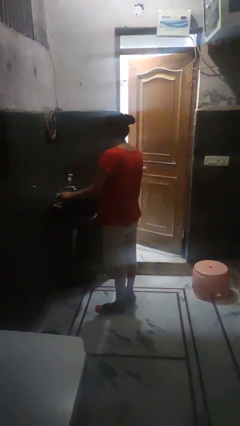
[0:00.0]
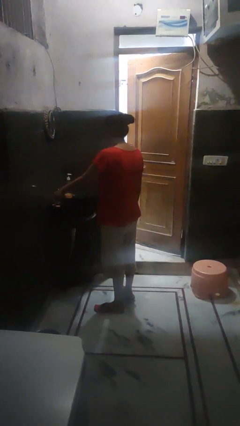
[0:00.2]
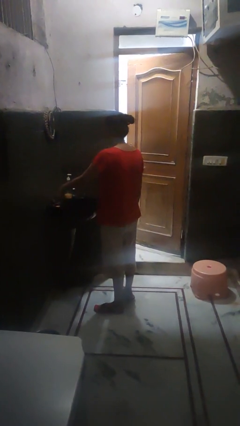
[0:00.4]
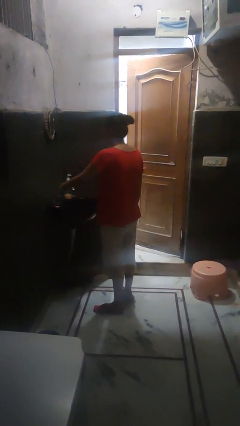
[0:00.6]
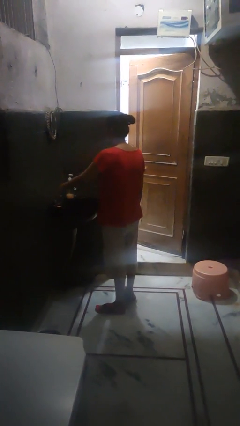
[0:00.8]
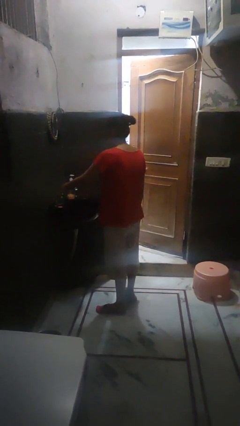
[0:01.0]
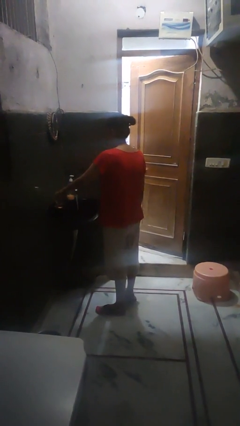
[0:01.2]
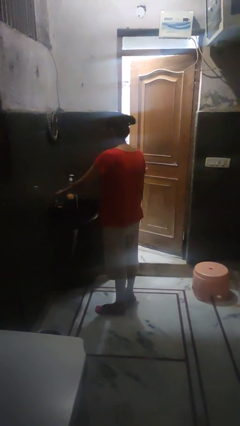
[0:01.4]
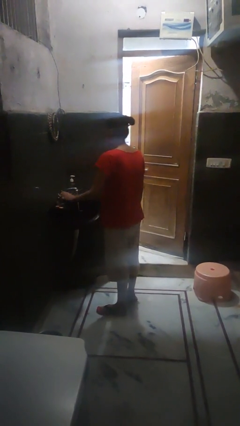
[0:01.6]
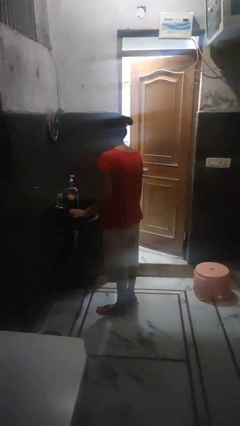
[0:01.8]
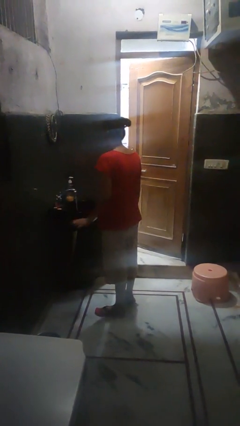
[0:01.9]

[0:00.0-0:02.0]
person turns on faucet

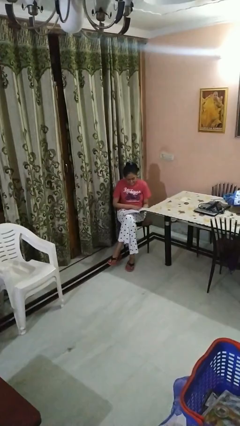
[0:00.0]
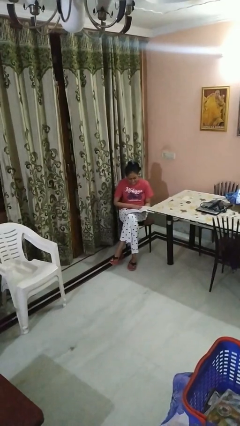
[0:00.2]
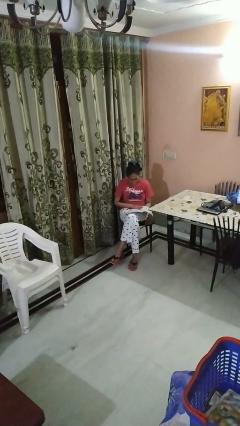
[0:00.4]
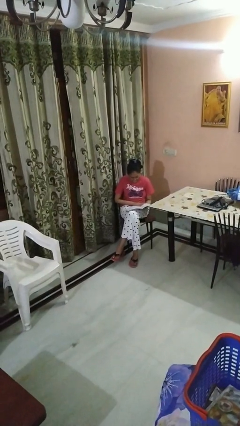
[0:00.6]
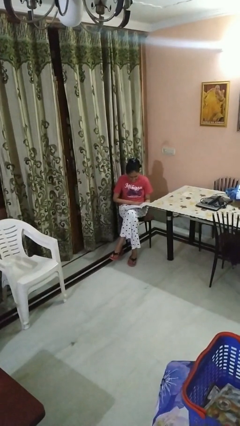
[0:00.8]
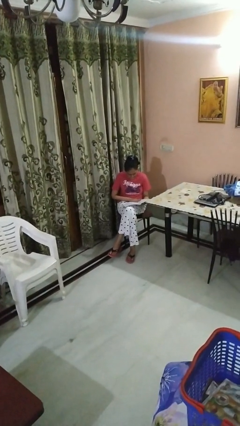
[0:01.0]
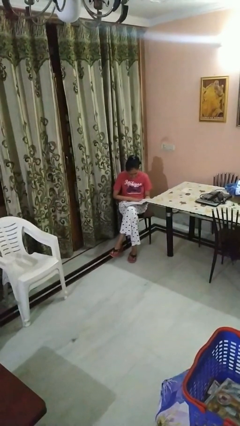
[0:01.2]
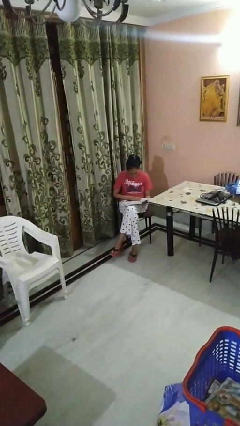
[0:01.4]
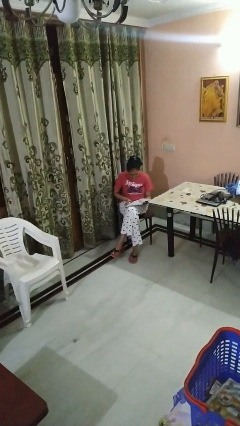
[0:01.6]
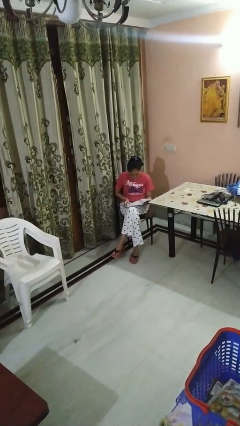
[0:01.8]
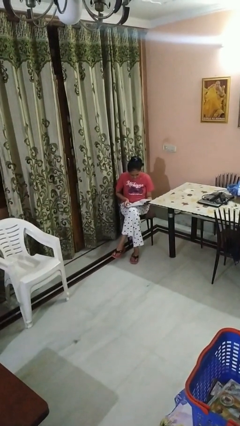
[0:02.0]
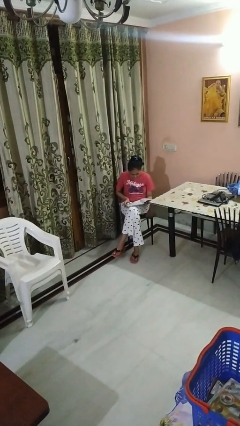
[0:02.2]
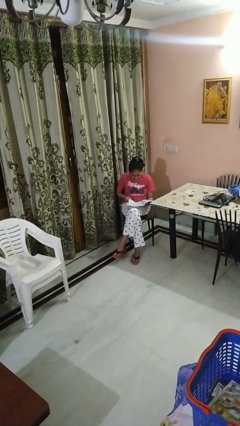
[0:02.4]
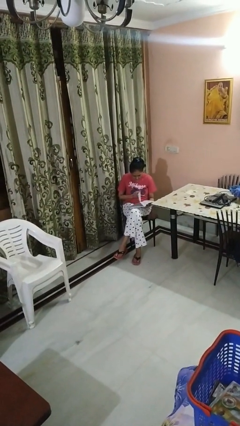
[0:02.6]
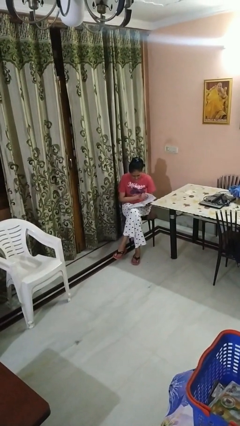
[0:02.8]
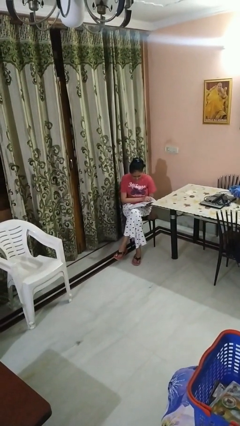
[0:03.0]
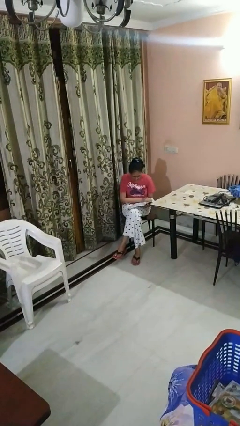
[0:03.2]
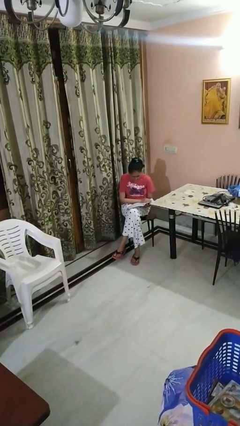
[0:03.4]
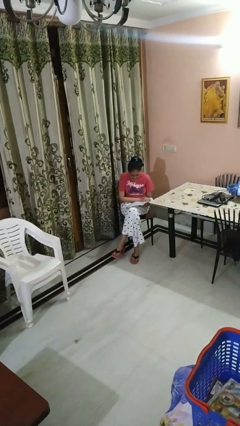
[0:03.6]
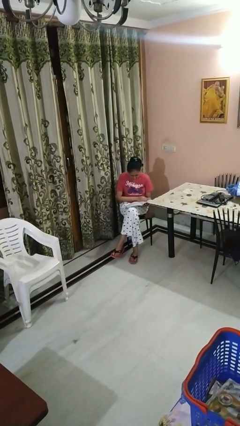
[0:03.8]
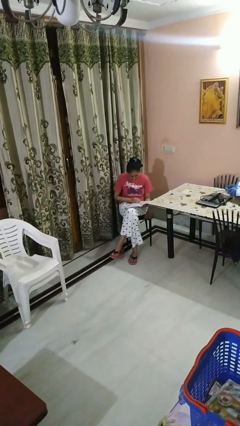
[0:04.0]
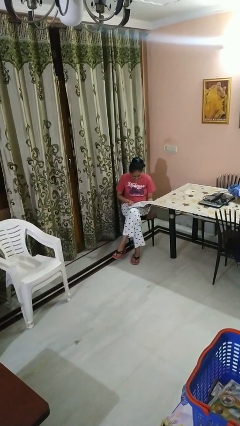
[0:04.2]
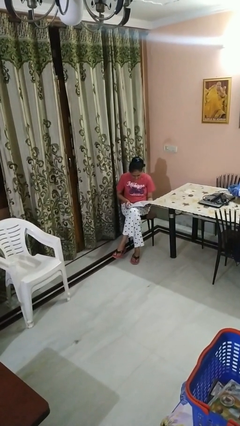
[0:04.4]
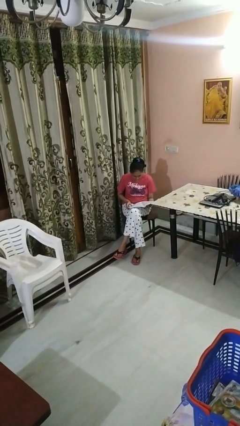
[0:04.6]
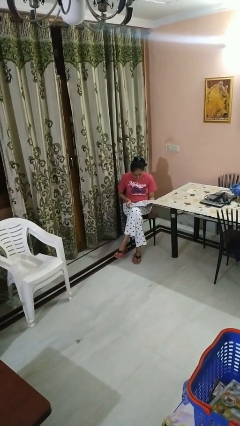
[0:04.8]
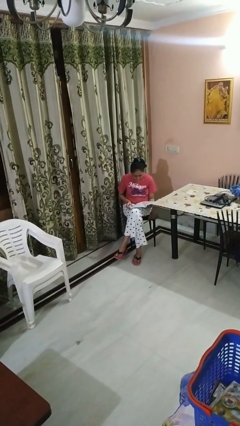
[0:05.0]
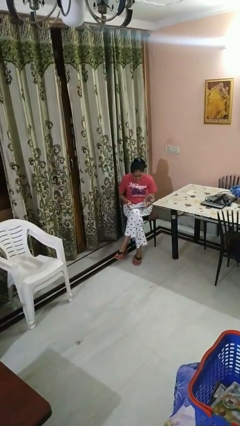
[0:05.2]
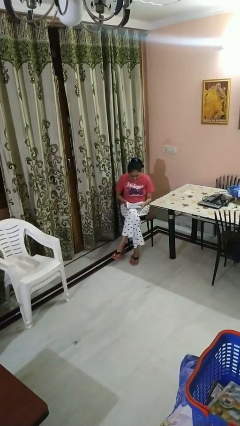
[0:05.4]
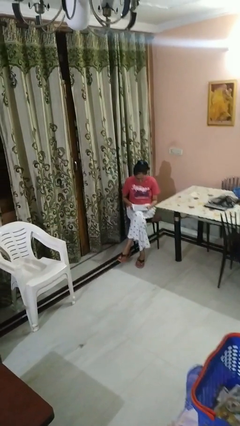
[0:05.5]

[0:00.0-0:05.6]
person reads magazine

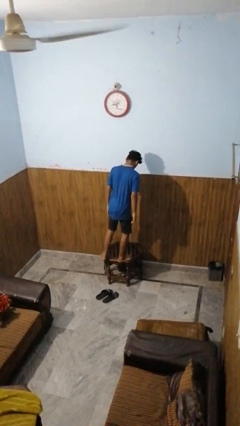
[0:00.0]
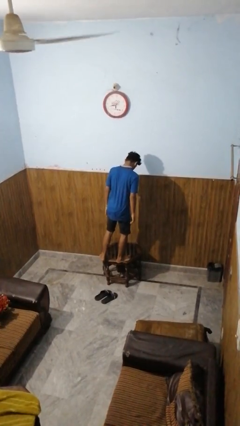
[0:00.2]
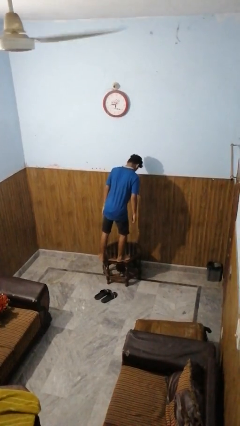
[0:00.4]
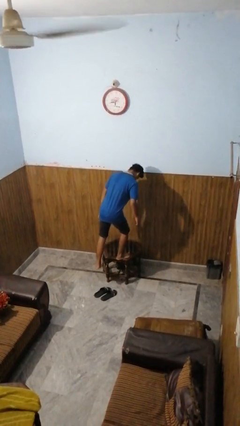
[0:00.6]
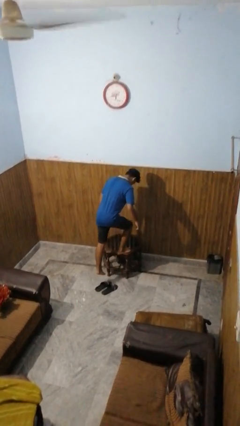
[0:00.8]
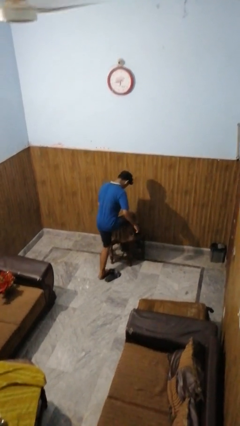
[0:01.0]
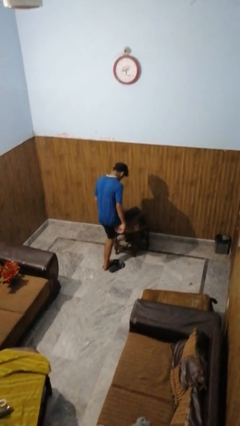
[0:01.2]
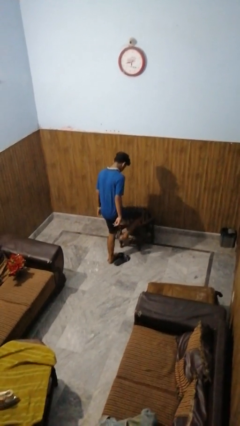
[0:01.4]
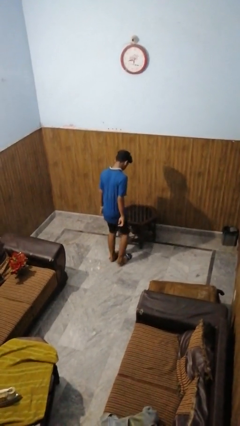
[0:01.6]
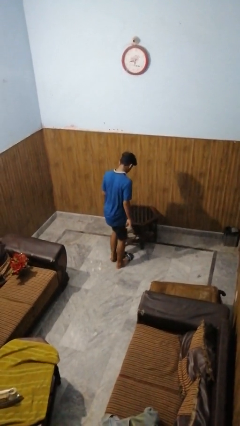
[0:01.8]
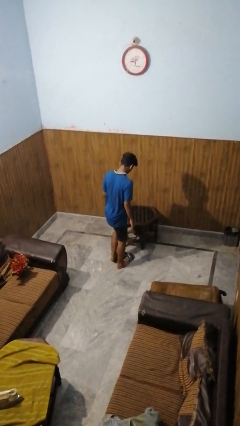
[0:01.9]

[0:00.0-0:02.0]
person climbs off table

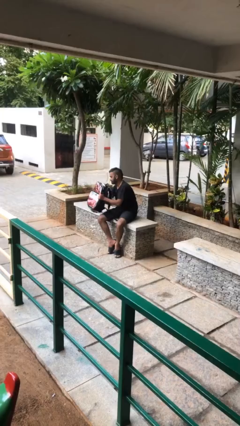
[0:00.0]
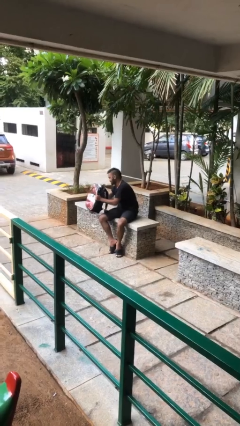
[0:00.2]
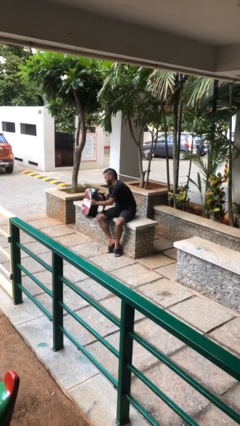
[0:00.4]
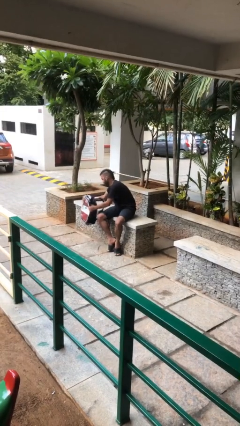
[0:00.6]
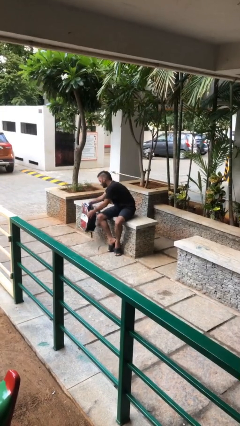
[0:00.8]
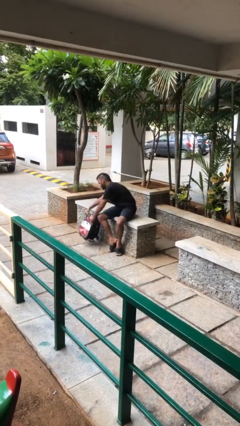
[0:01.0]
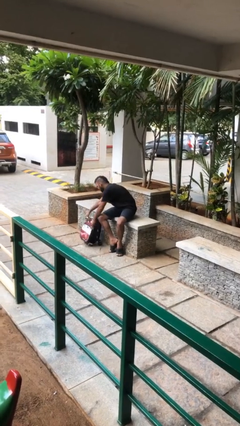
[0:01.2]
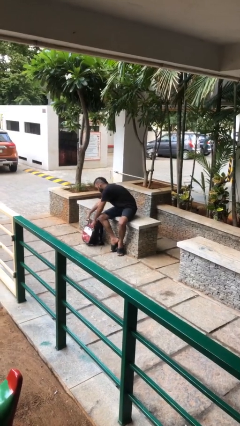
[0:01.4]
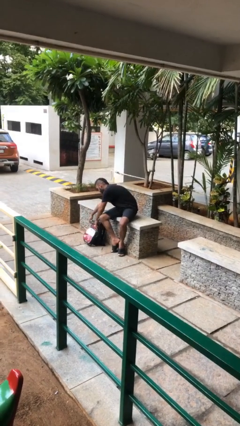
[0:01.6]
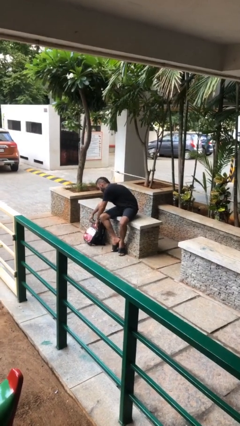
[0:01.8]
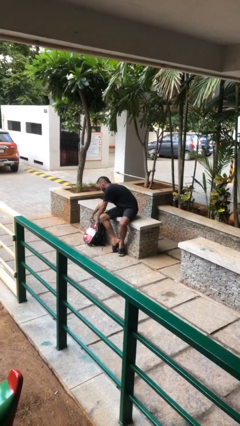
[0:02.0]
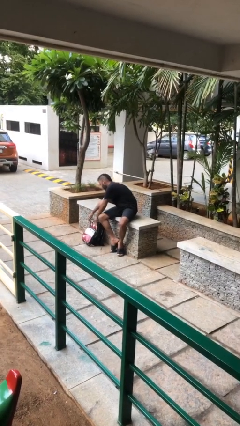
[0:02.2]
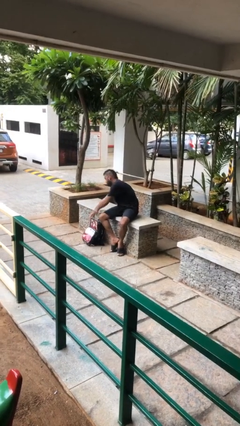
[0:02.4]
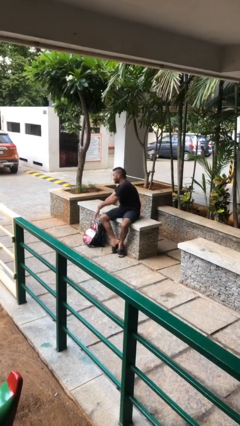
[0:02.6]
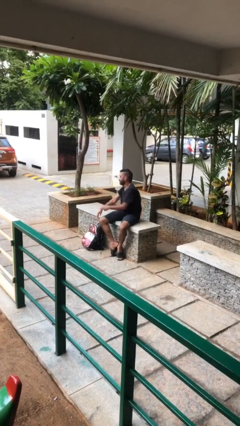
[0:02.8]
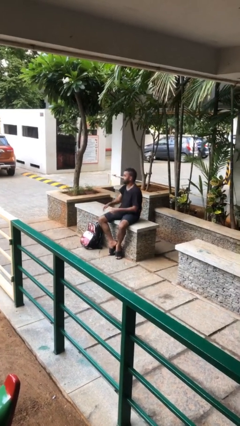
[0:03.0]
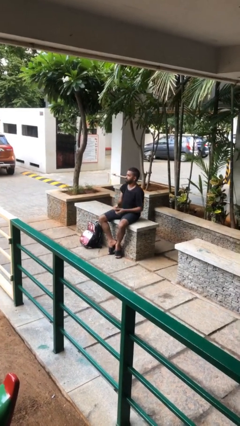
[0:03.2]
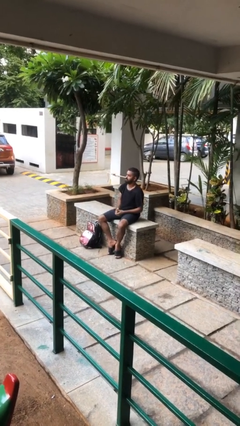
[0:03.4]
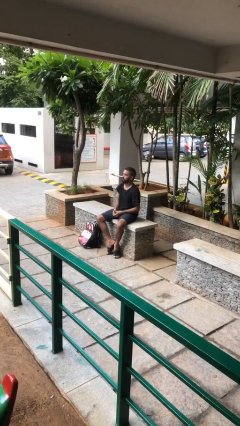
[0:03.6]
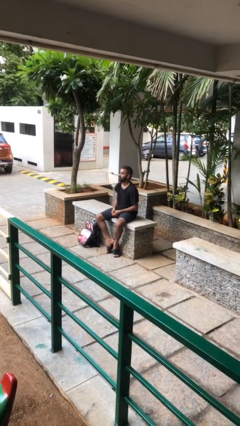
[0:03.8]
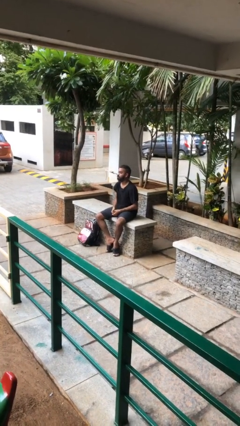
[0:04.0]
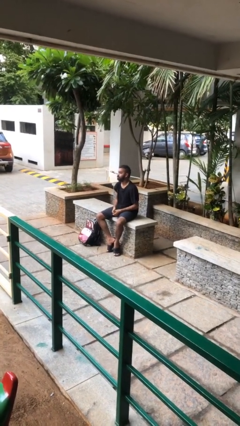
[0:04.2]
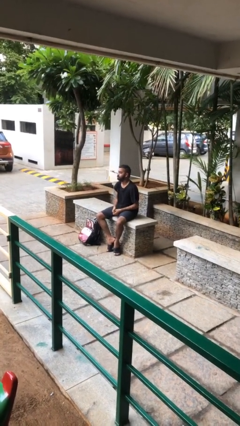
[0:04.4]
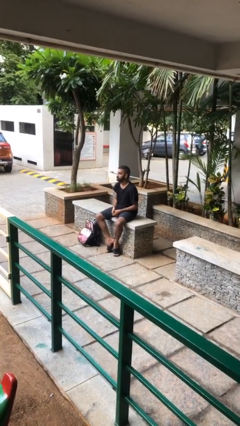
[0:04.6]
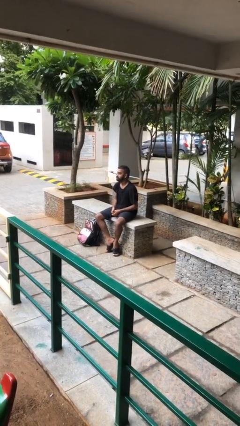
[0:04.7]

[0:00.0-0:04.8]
person puts down object on floor

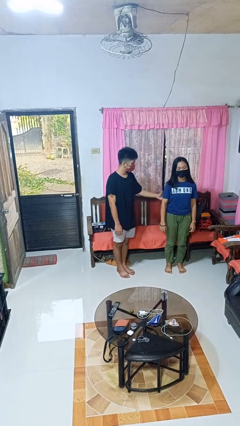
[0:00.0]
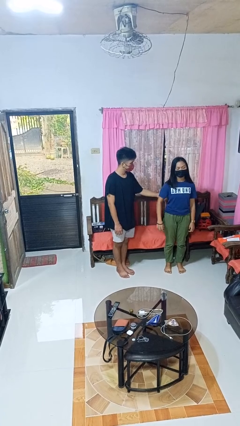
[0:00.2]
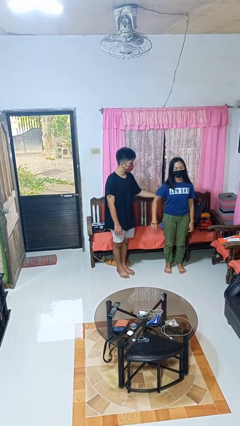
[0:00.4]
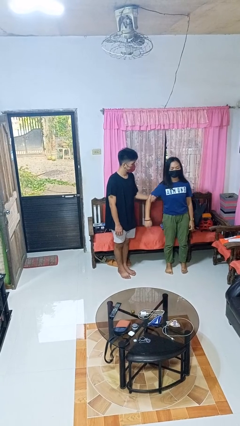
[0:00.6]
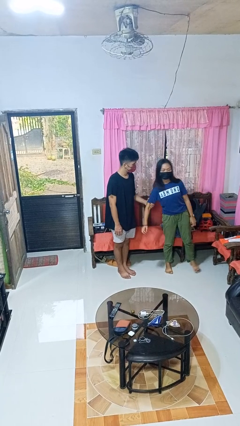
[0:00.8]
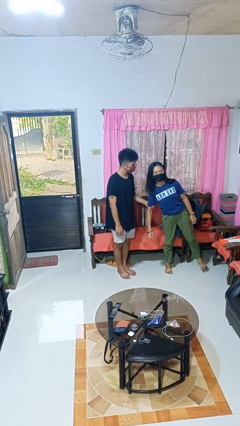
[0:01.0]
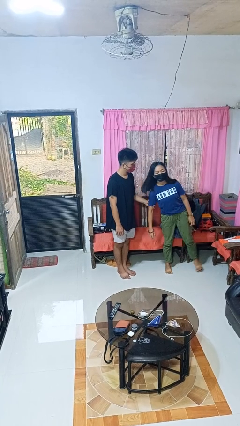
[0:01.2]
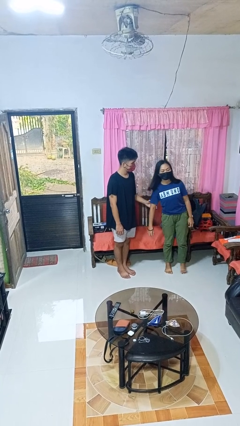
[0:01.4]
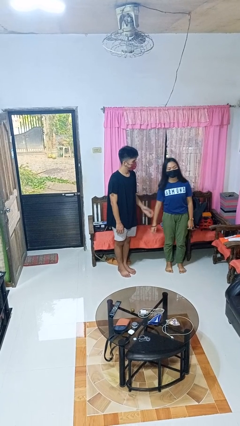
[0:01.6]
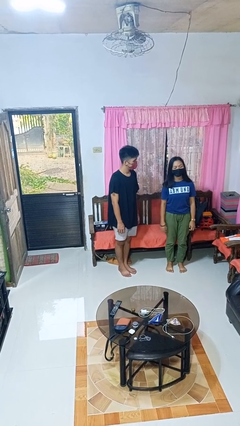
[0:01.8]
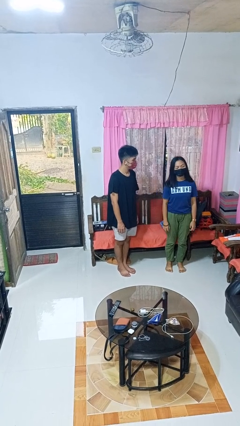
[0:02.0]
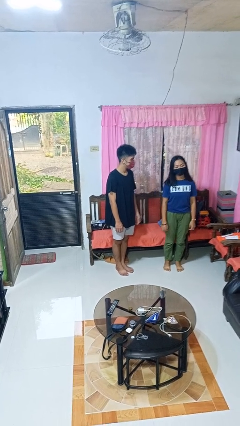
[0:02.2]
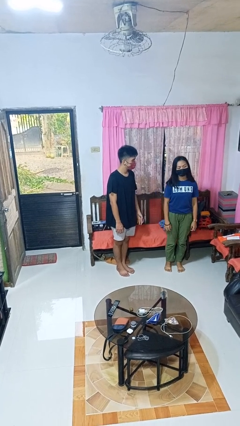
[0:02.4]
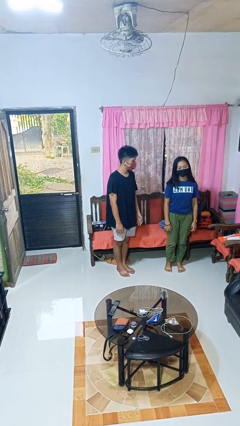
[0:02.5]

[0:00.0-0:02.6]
person grabs person by bicep
